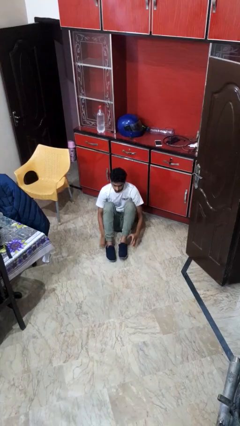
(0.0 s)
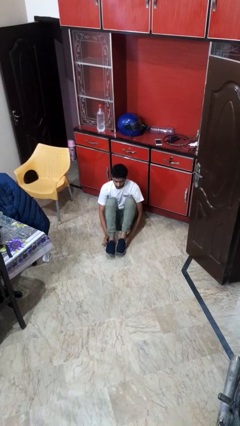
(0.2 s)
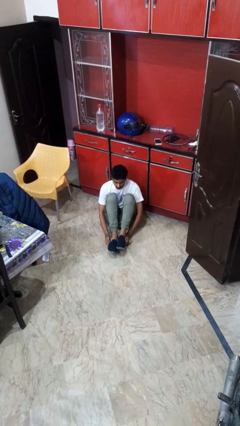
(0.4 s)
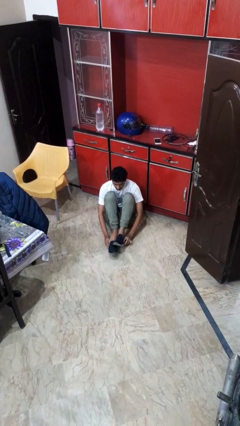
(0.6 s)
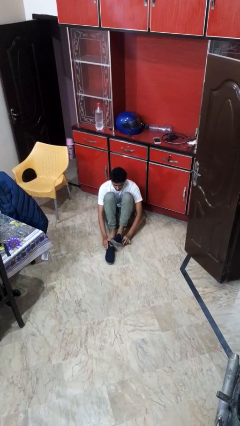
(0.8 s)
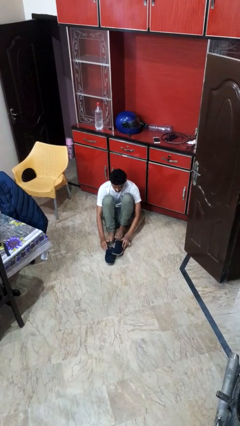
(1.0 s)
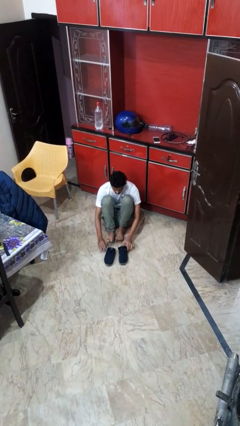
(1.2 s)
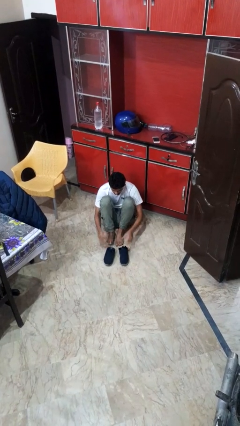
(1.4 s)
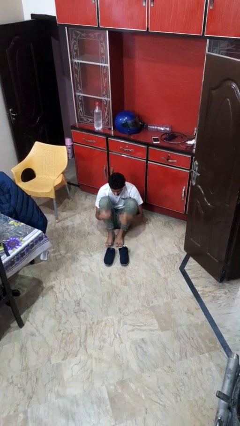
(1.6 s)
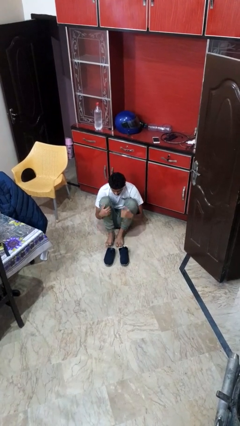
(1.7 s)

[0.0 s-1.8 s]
person takes off shoes

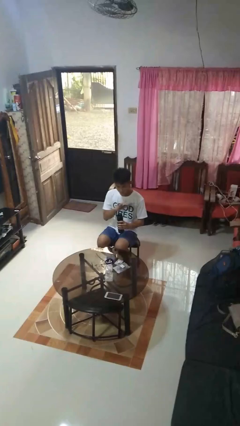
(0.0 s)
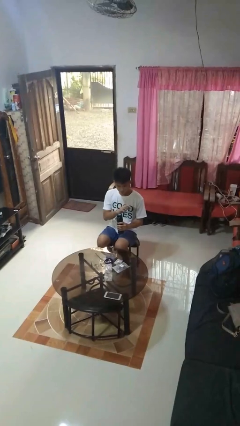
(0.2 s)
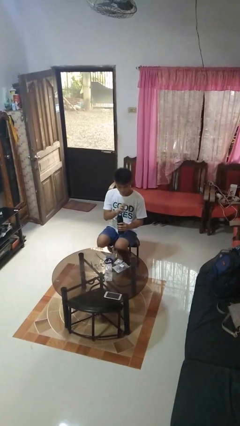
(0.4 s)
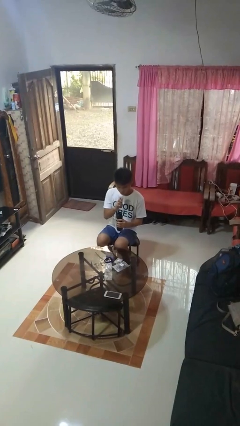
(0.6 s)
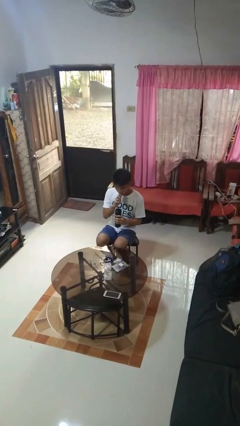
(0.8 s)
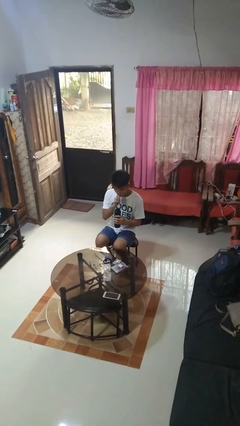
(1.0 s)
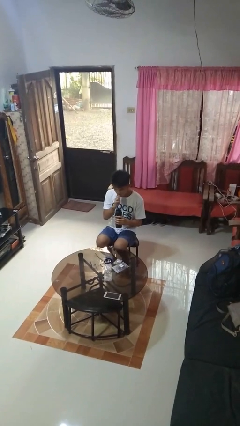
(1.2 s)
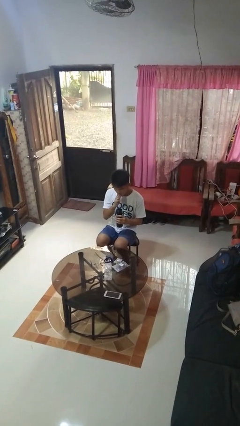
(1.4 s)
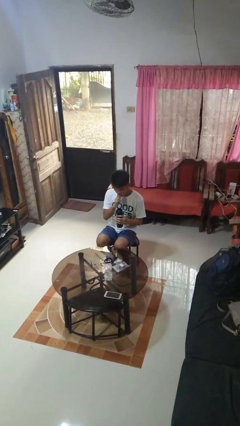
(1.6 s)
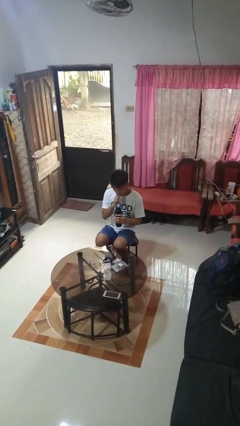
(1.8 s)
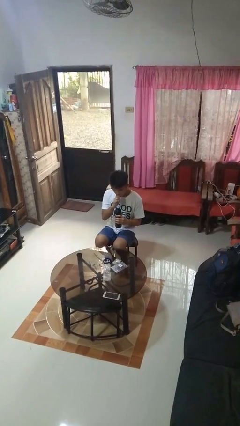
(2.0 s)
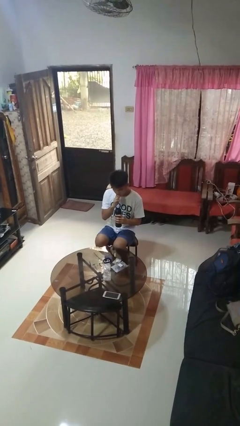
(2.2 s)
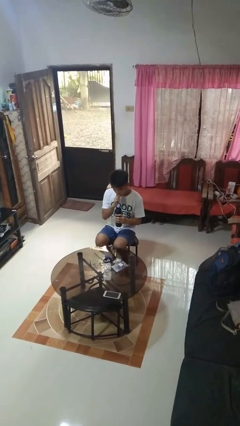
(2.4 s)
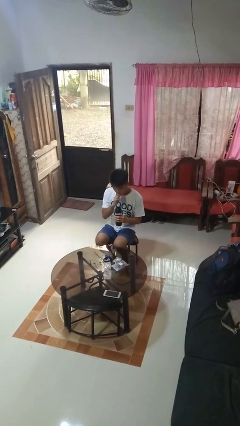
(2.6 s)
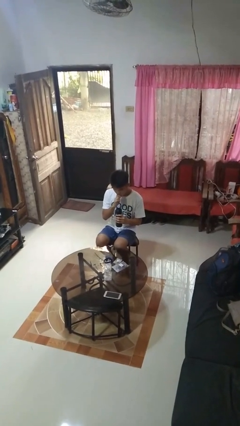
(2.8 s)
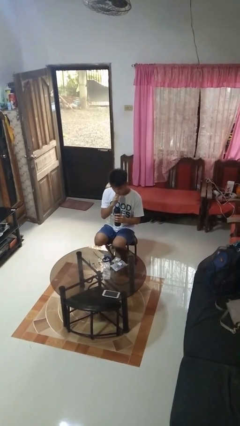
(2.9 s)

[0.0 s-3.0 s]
person drinks from straw

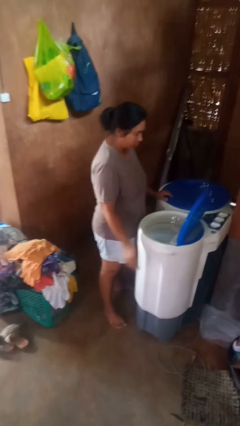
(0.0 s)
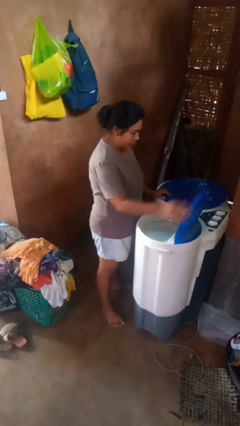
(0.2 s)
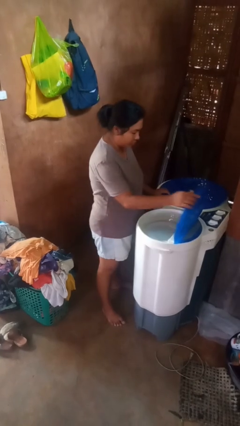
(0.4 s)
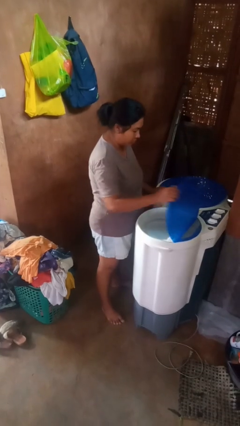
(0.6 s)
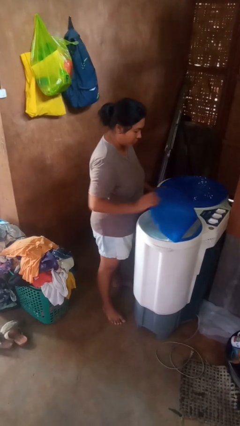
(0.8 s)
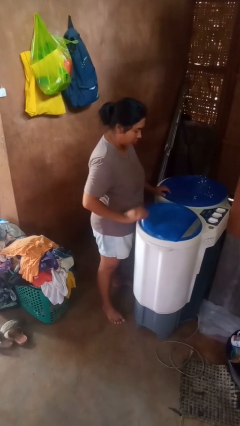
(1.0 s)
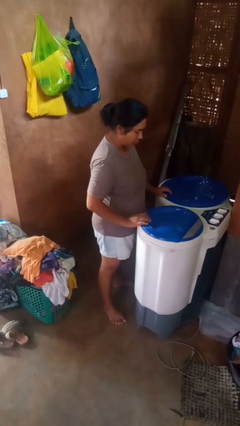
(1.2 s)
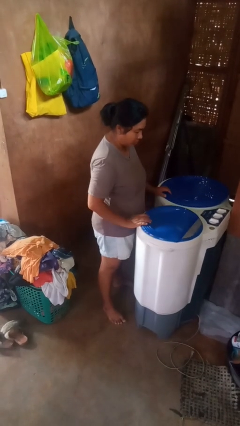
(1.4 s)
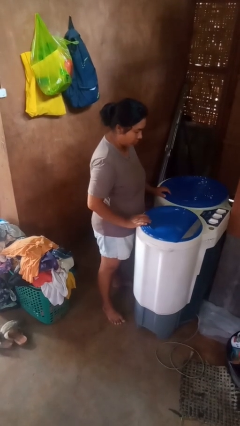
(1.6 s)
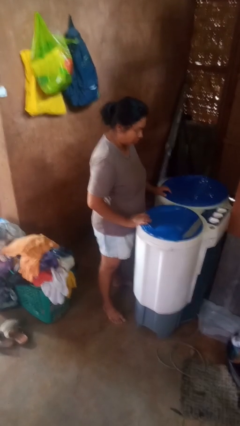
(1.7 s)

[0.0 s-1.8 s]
person closes clothes washer

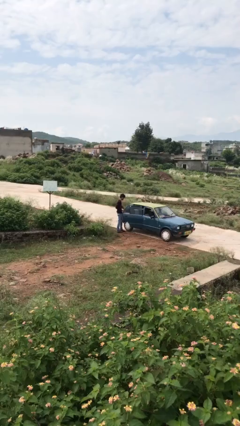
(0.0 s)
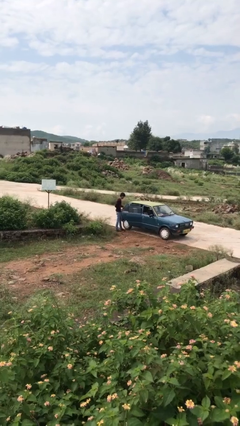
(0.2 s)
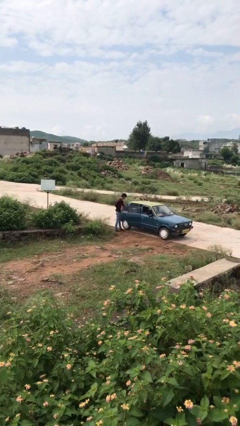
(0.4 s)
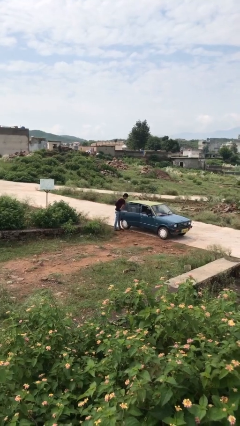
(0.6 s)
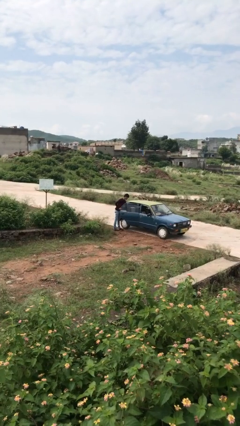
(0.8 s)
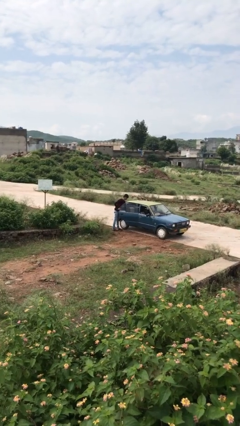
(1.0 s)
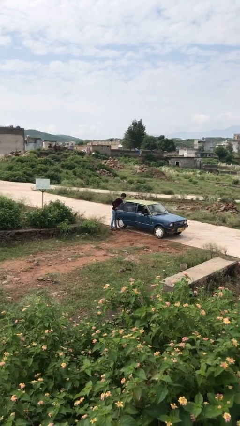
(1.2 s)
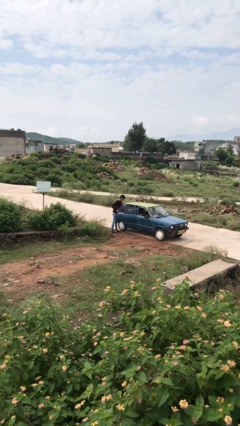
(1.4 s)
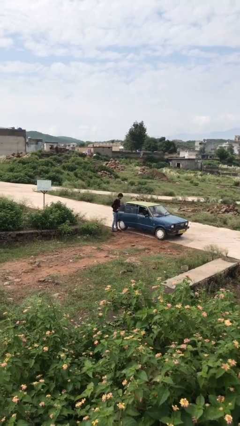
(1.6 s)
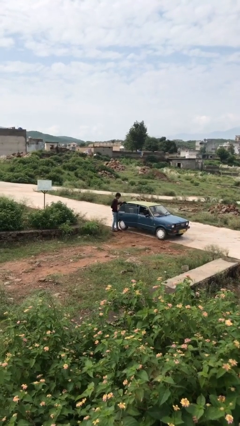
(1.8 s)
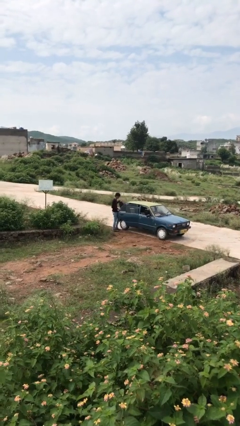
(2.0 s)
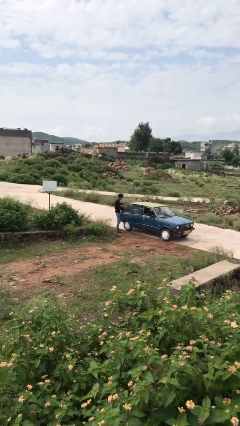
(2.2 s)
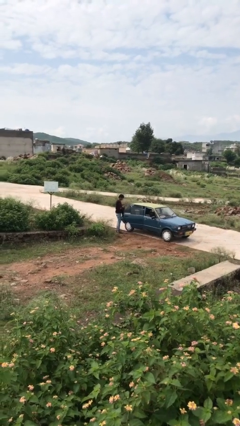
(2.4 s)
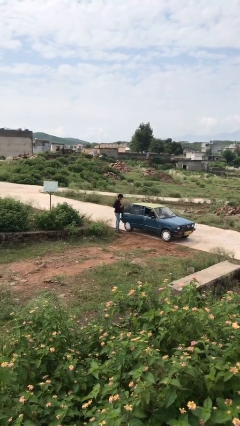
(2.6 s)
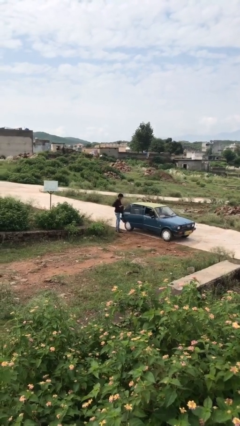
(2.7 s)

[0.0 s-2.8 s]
person unloads car

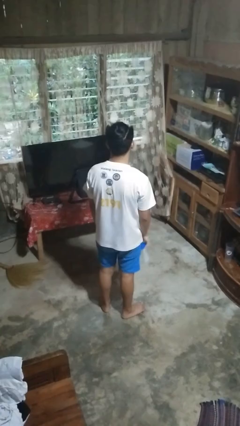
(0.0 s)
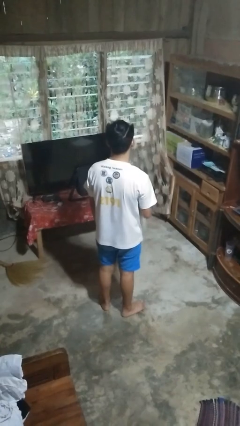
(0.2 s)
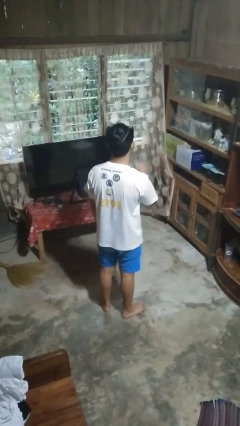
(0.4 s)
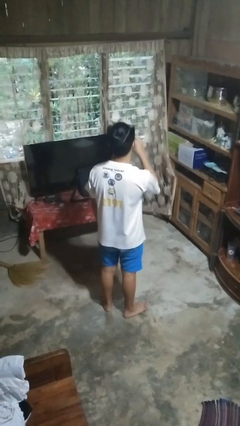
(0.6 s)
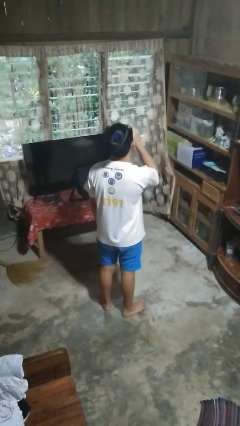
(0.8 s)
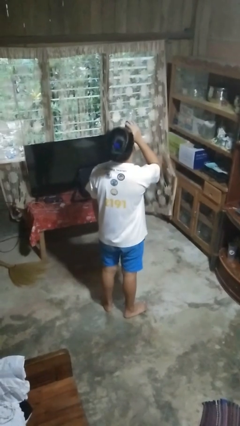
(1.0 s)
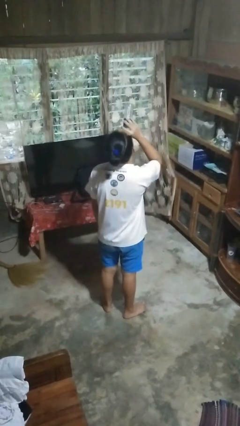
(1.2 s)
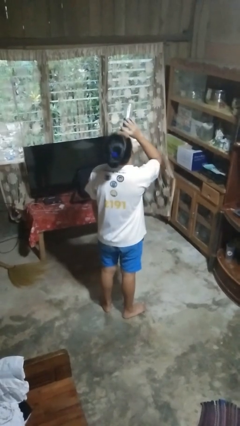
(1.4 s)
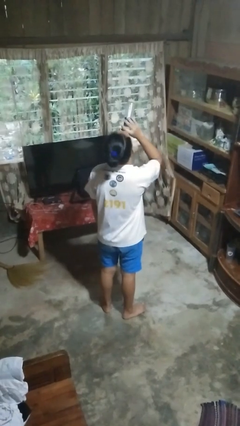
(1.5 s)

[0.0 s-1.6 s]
person drinks from bottle

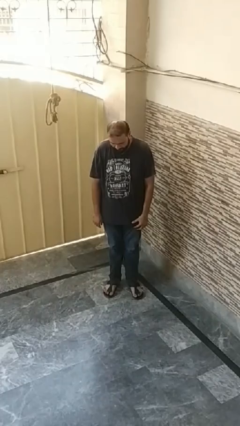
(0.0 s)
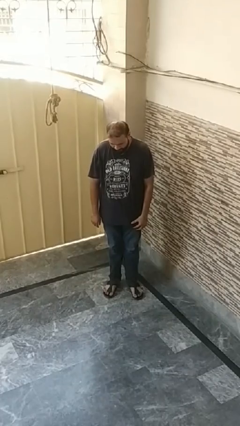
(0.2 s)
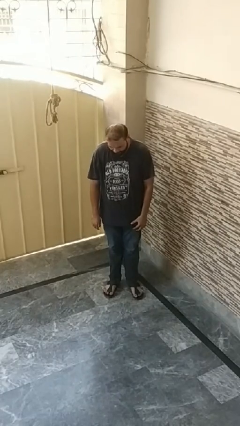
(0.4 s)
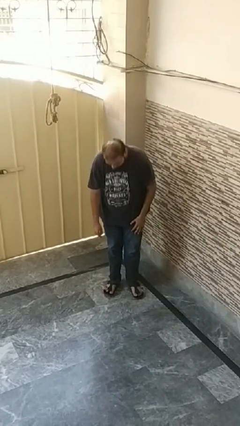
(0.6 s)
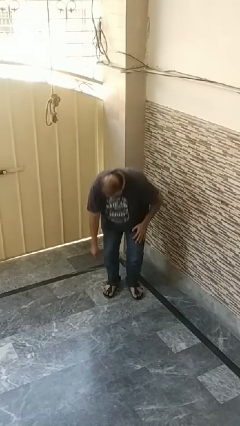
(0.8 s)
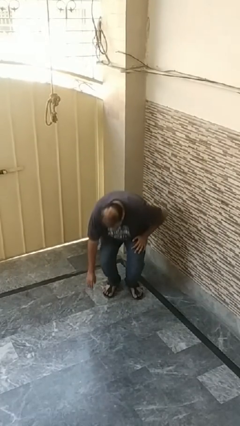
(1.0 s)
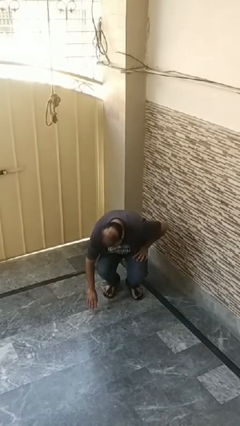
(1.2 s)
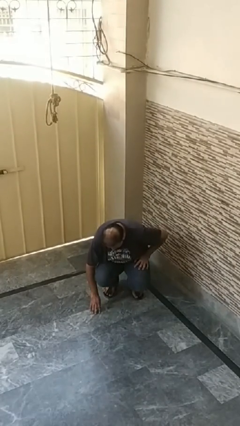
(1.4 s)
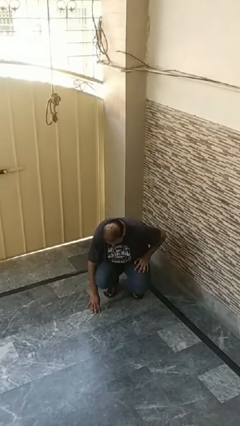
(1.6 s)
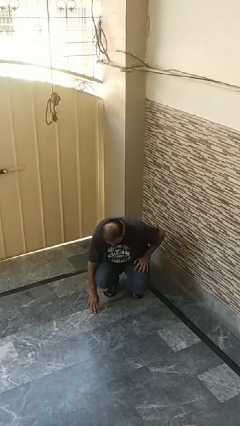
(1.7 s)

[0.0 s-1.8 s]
person falls while standing

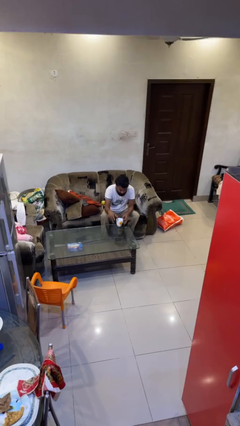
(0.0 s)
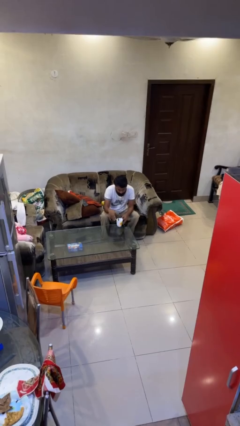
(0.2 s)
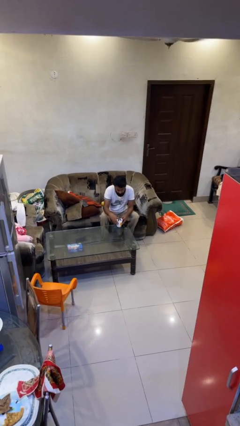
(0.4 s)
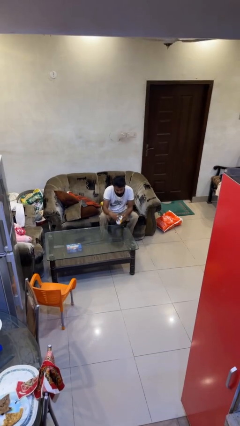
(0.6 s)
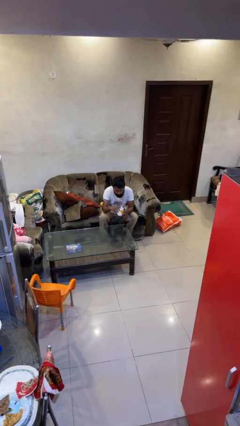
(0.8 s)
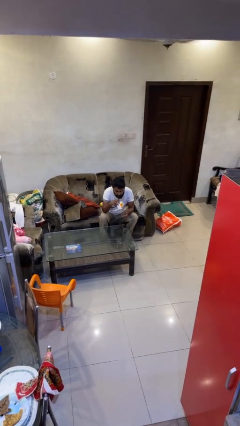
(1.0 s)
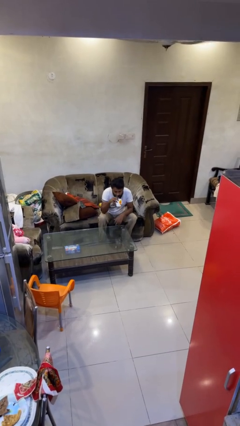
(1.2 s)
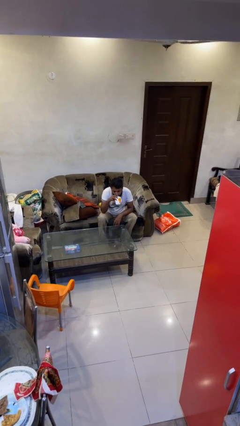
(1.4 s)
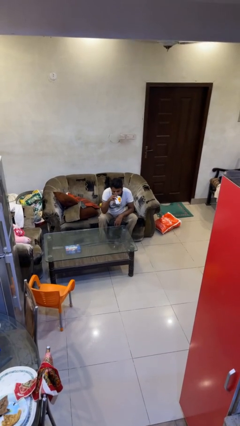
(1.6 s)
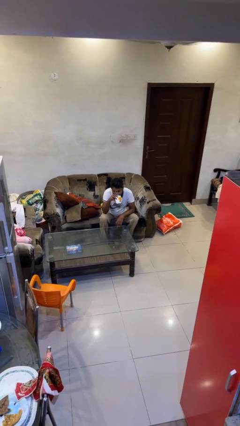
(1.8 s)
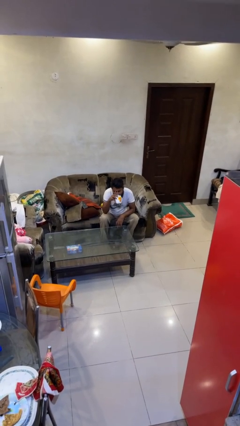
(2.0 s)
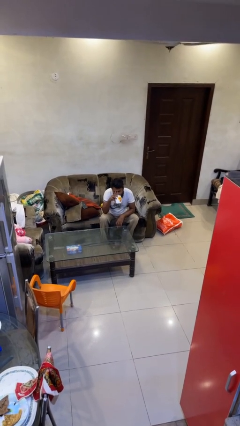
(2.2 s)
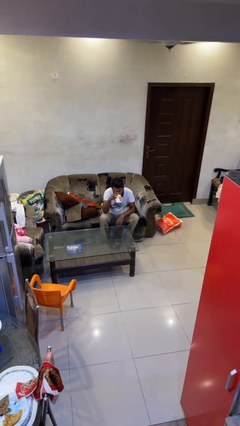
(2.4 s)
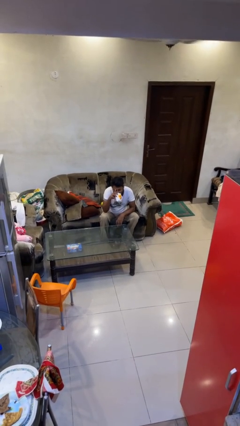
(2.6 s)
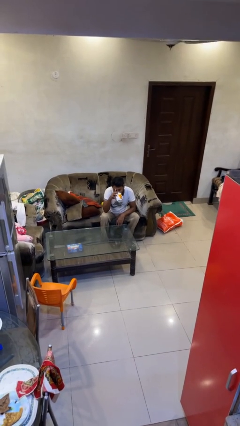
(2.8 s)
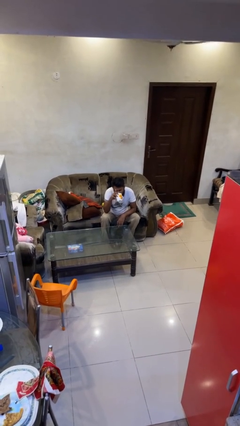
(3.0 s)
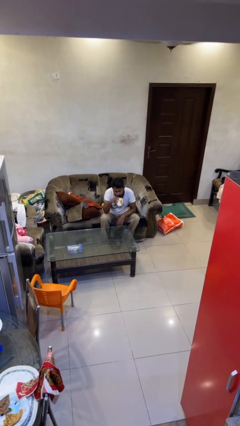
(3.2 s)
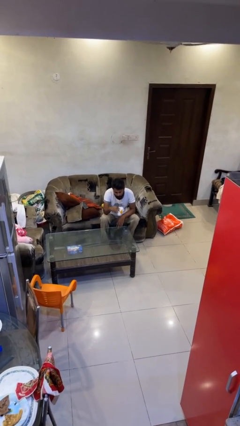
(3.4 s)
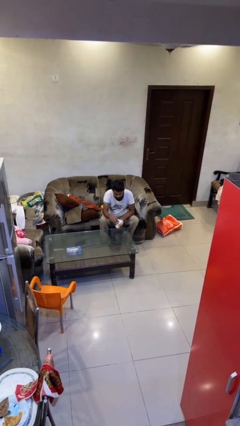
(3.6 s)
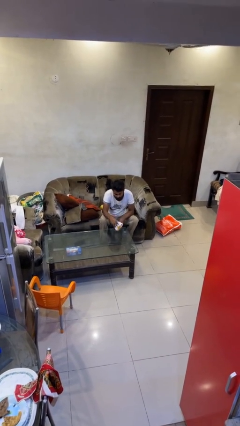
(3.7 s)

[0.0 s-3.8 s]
person drinks from mug

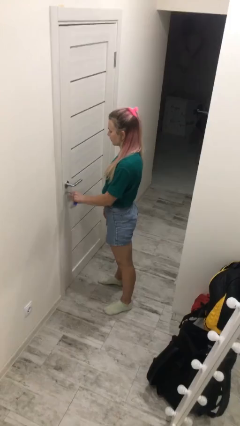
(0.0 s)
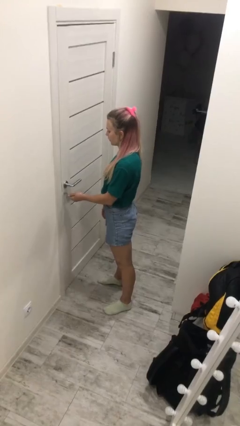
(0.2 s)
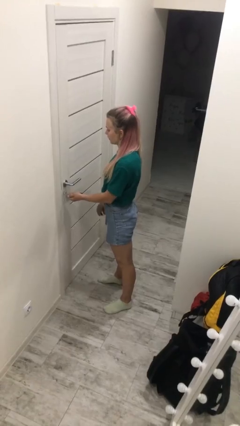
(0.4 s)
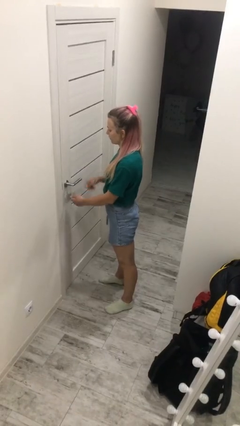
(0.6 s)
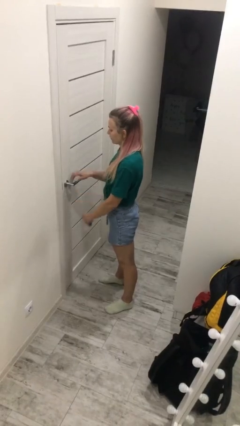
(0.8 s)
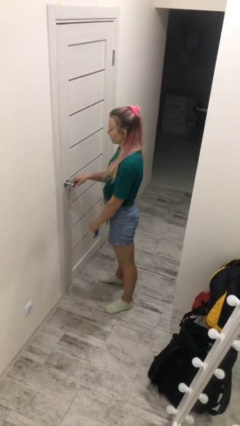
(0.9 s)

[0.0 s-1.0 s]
person unlocks door with keys
